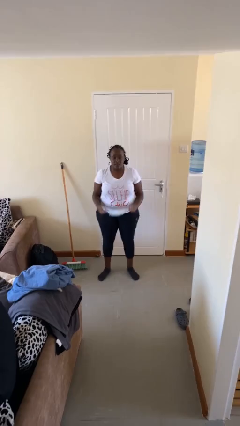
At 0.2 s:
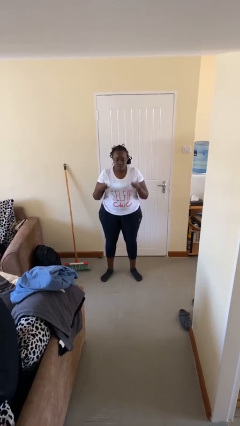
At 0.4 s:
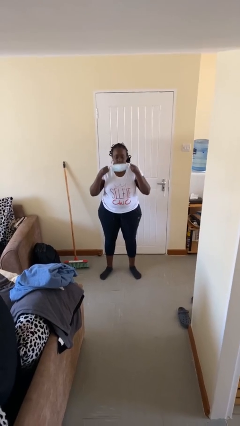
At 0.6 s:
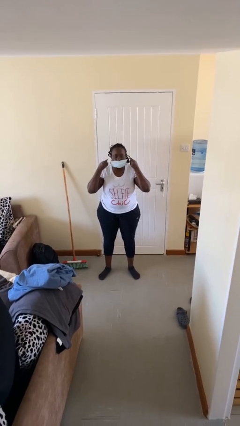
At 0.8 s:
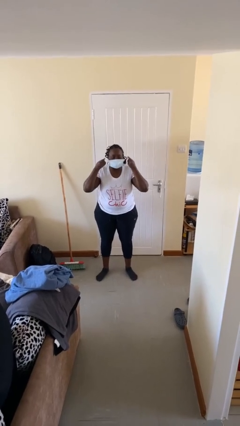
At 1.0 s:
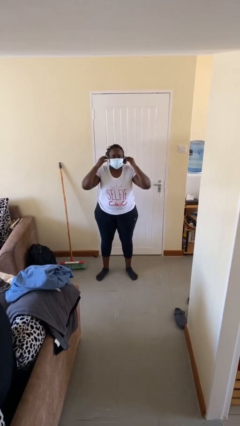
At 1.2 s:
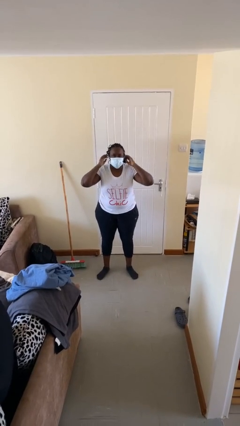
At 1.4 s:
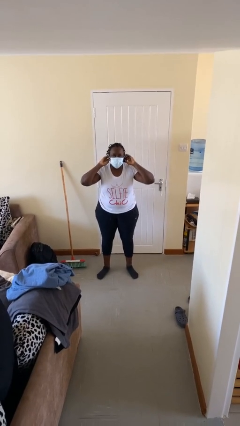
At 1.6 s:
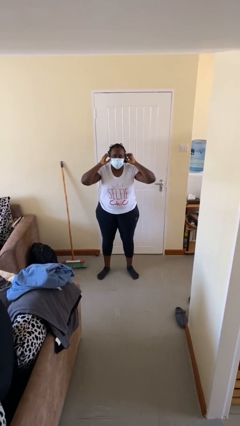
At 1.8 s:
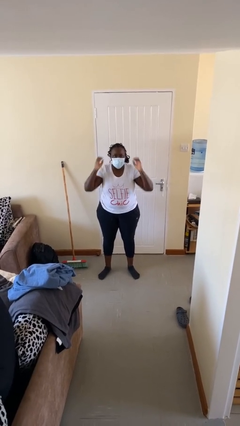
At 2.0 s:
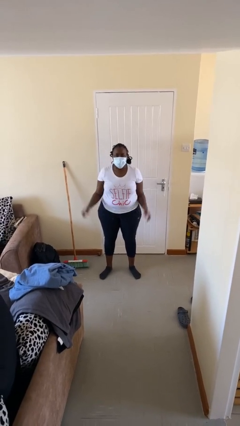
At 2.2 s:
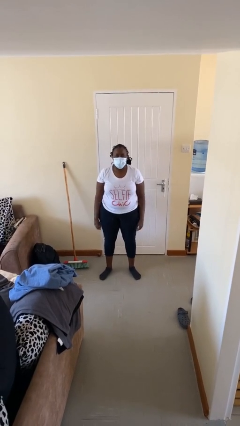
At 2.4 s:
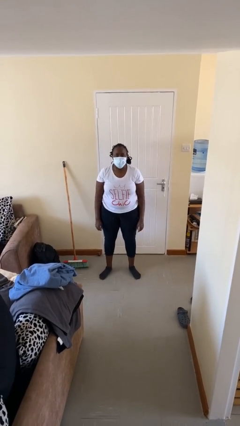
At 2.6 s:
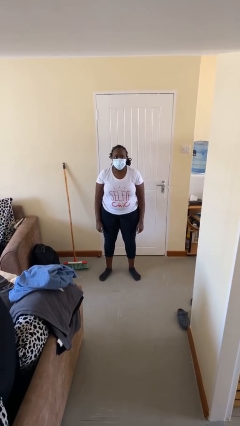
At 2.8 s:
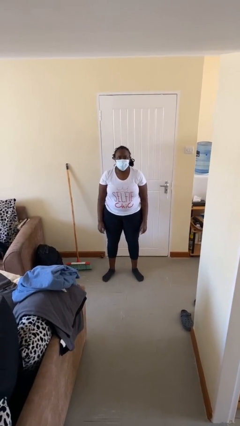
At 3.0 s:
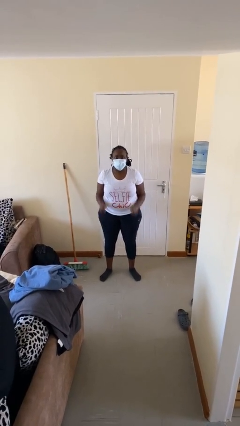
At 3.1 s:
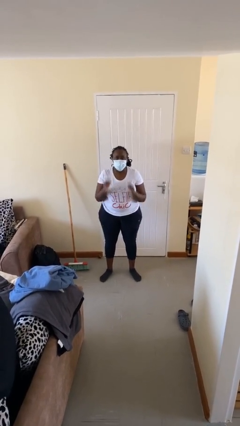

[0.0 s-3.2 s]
person puts on facemask

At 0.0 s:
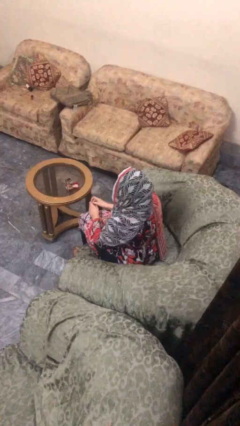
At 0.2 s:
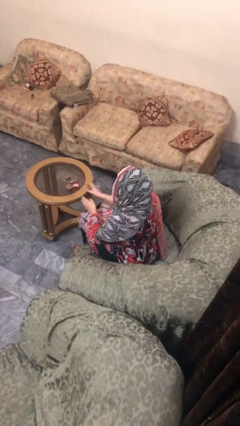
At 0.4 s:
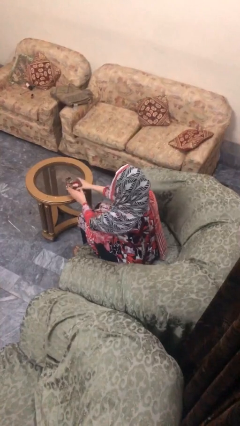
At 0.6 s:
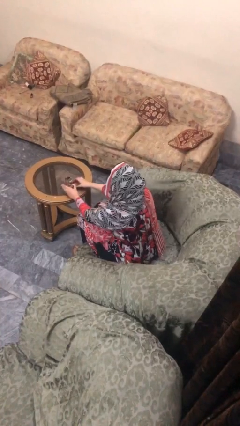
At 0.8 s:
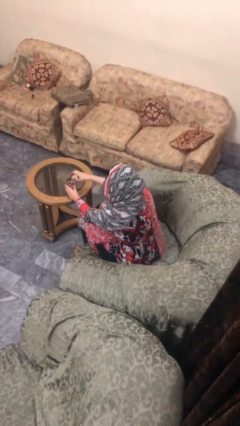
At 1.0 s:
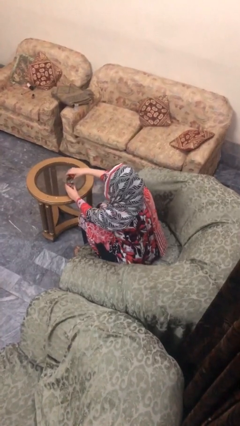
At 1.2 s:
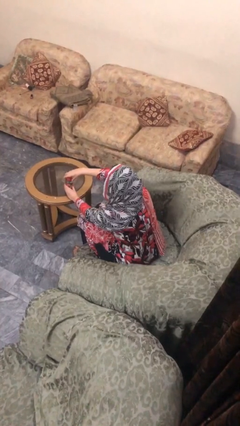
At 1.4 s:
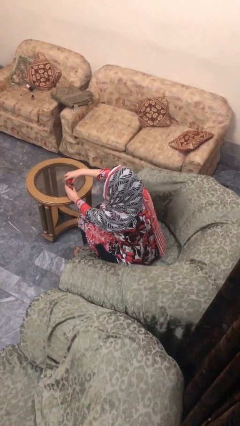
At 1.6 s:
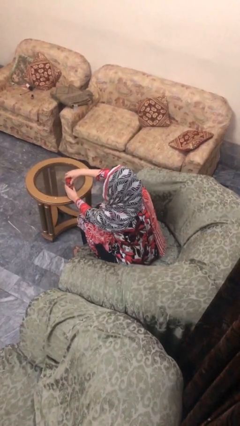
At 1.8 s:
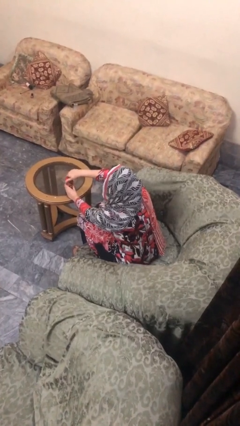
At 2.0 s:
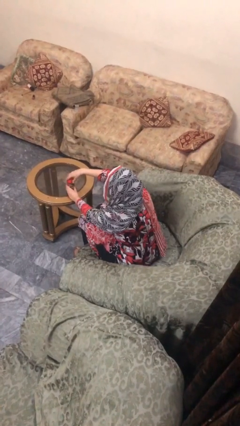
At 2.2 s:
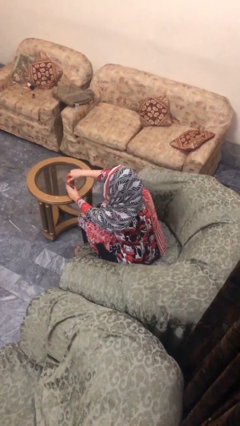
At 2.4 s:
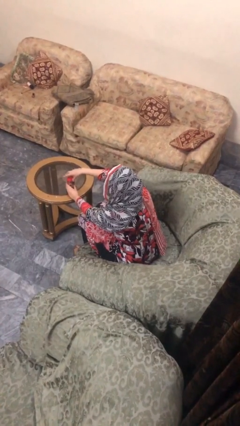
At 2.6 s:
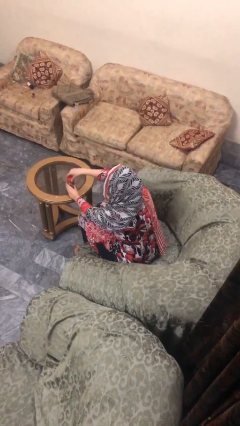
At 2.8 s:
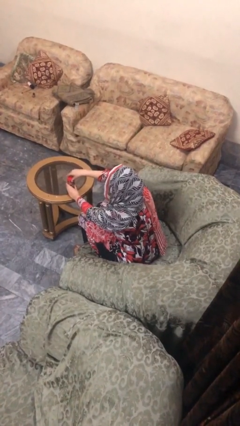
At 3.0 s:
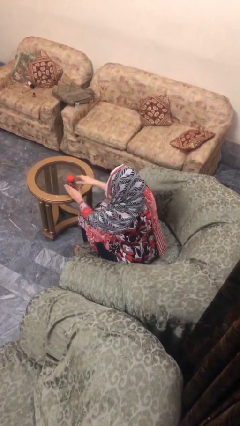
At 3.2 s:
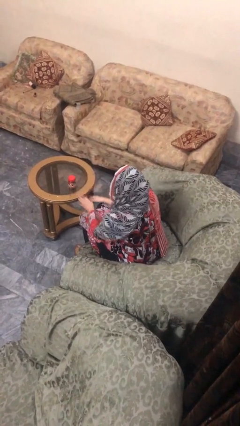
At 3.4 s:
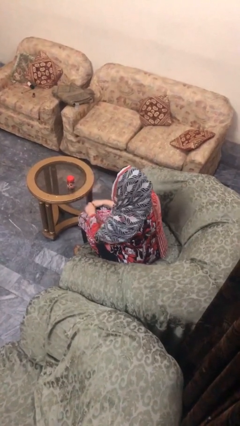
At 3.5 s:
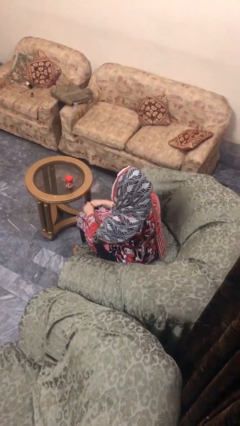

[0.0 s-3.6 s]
person closes jar

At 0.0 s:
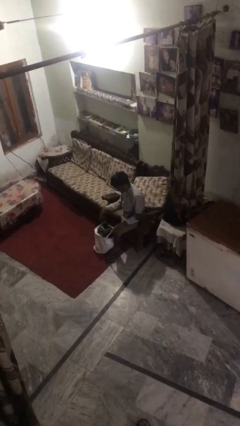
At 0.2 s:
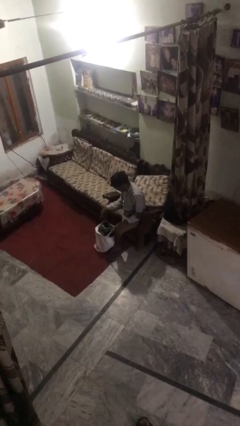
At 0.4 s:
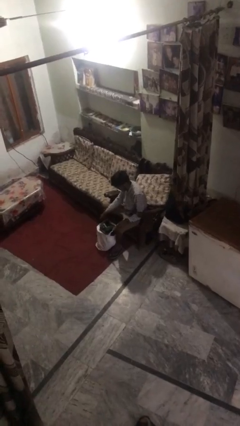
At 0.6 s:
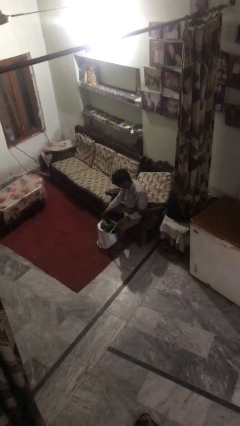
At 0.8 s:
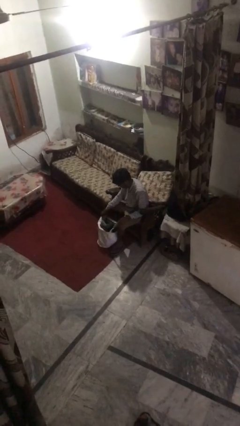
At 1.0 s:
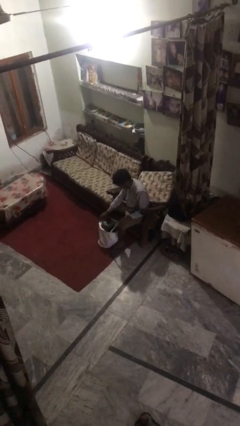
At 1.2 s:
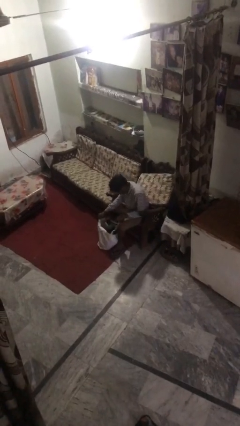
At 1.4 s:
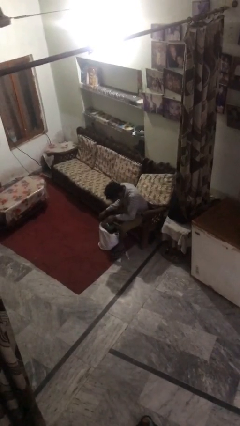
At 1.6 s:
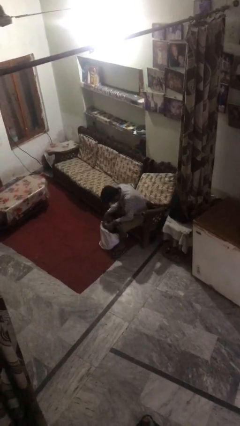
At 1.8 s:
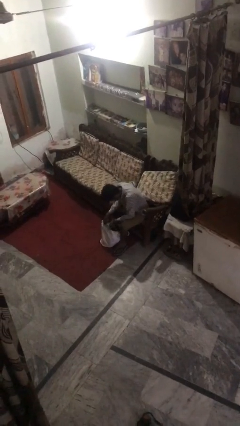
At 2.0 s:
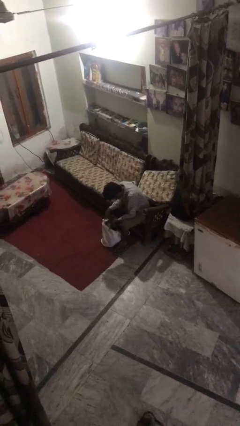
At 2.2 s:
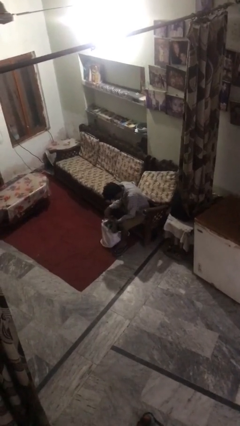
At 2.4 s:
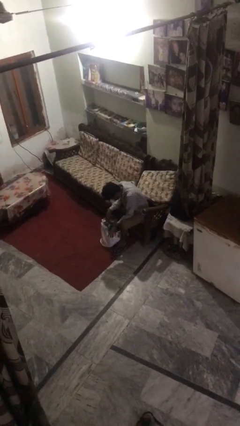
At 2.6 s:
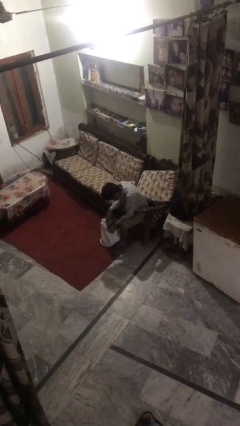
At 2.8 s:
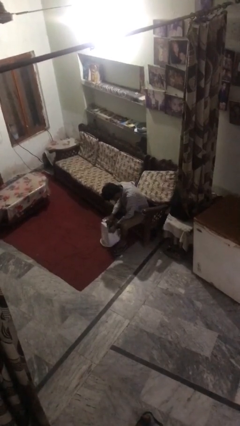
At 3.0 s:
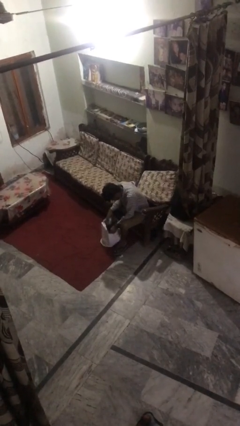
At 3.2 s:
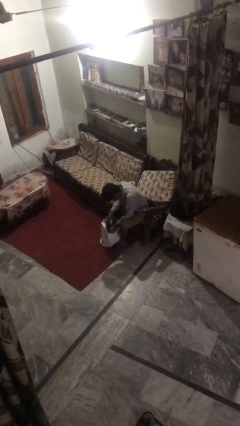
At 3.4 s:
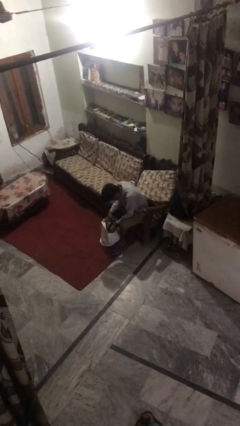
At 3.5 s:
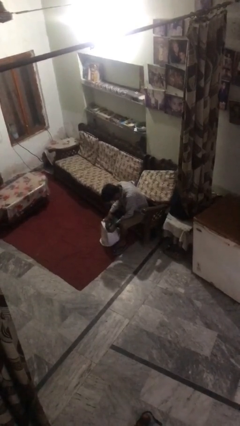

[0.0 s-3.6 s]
person searches under bed

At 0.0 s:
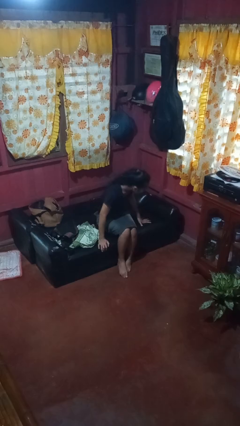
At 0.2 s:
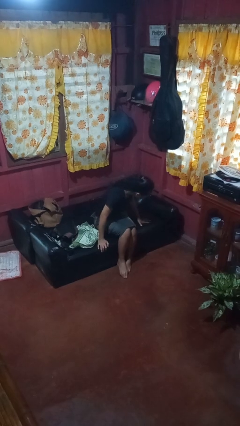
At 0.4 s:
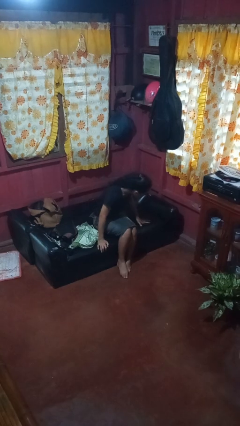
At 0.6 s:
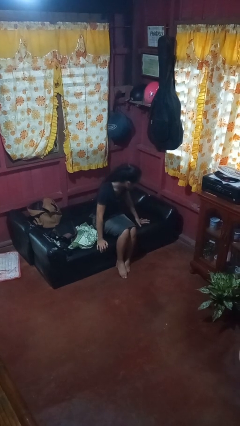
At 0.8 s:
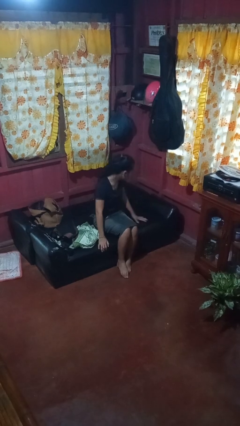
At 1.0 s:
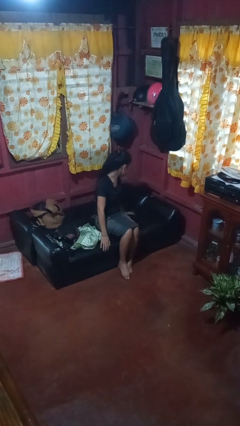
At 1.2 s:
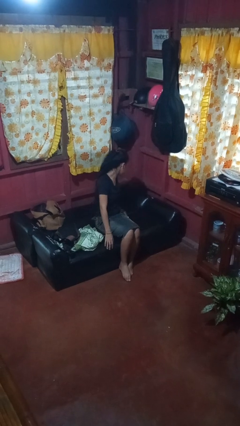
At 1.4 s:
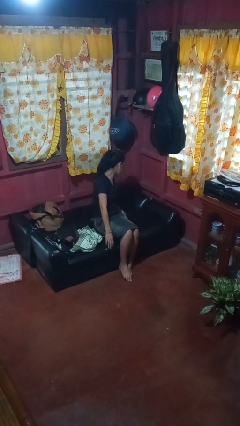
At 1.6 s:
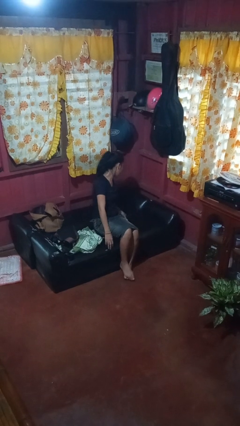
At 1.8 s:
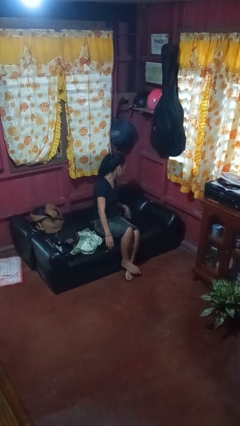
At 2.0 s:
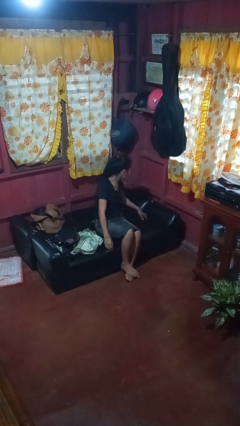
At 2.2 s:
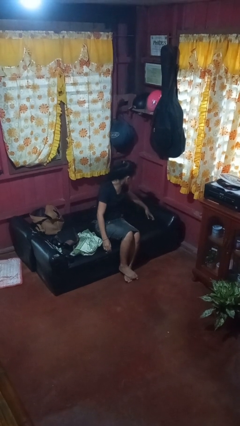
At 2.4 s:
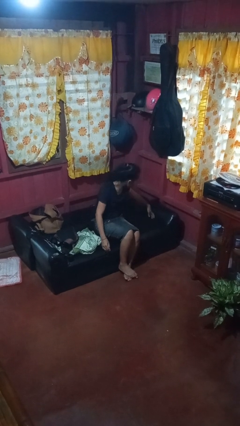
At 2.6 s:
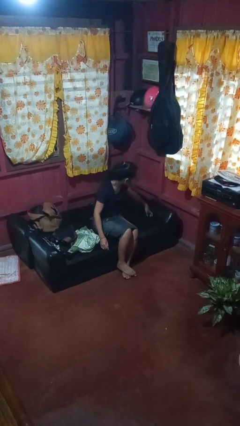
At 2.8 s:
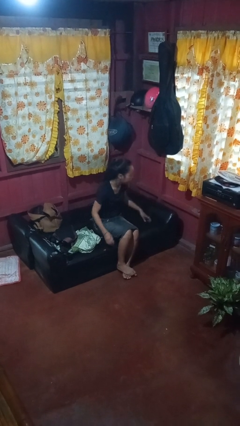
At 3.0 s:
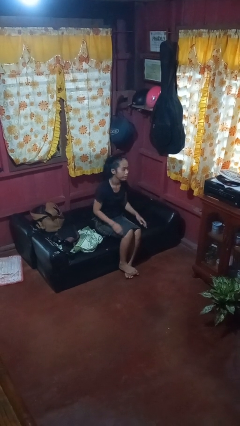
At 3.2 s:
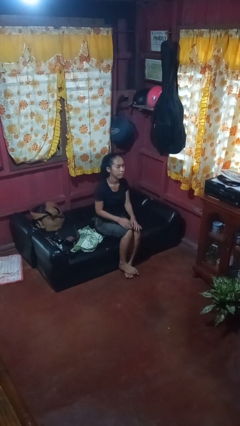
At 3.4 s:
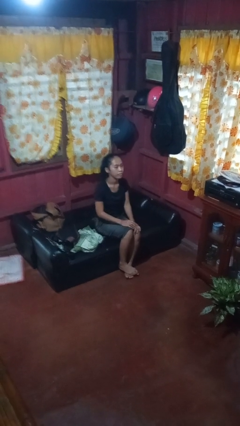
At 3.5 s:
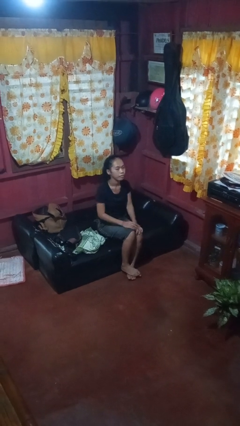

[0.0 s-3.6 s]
person searches in couch

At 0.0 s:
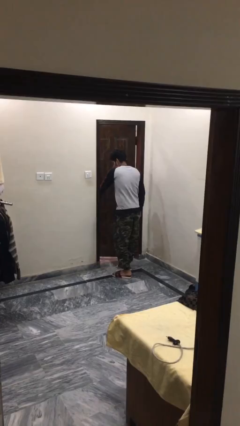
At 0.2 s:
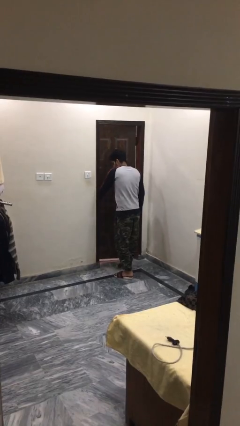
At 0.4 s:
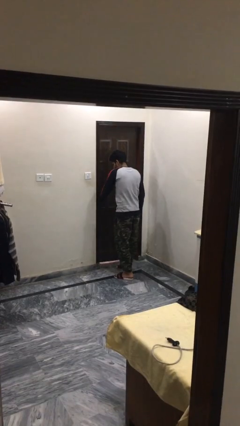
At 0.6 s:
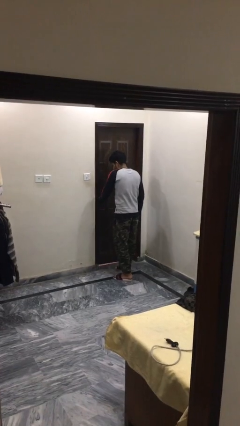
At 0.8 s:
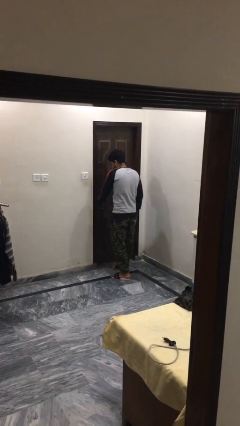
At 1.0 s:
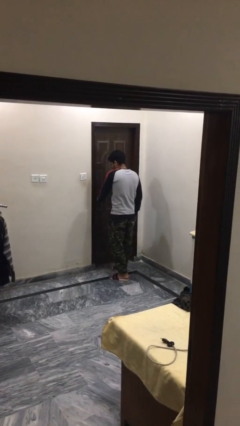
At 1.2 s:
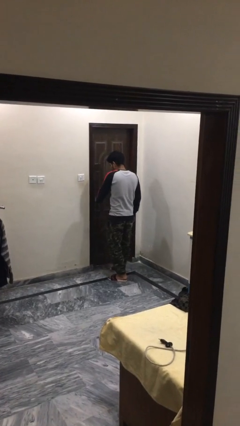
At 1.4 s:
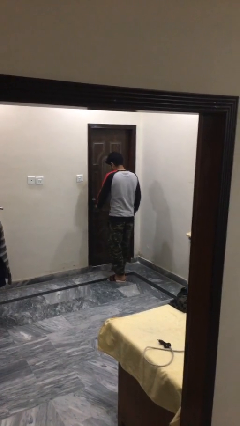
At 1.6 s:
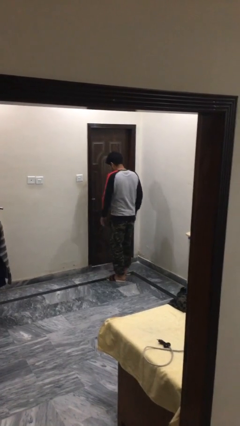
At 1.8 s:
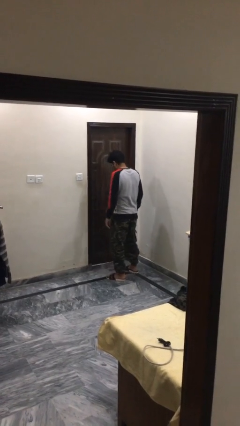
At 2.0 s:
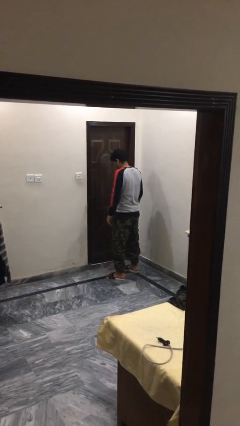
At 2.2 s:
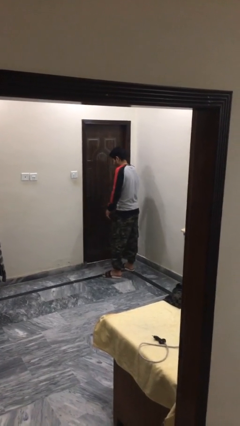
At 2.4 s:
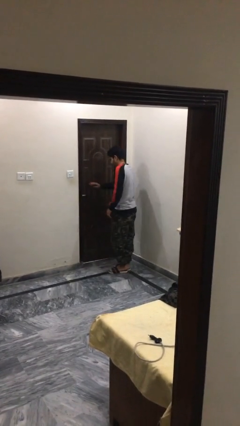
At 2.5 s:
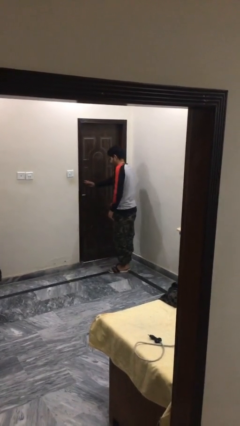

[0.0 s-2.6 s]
person closes facility door

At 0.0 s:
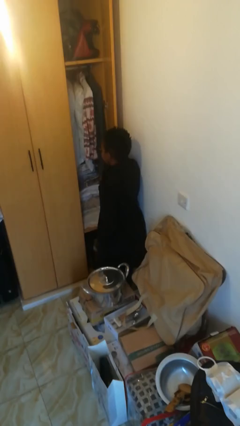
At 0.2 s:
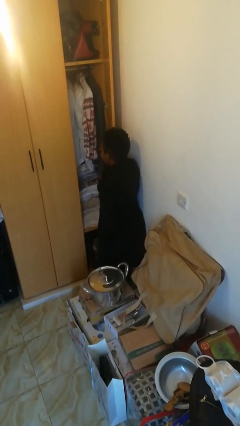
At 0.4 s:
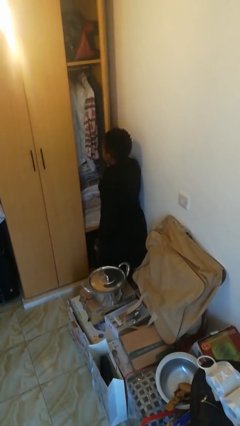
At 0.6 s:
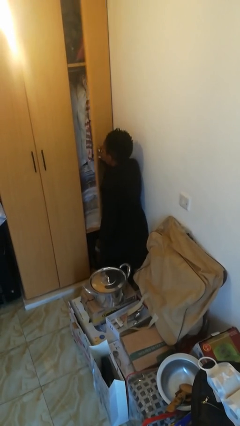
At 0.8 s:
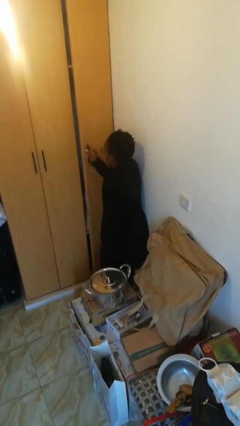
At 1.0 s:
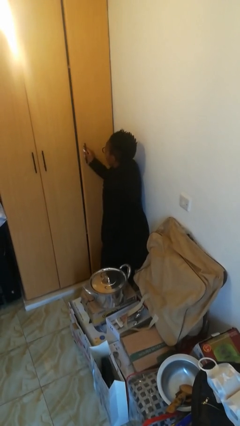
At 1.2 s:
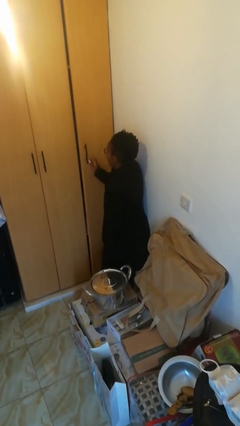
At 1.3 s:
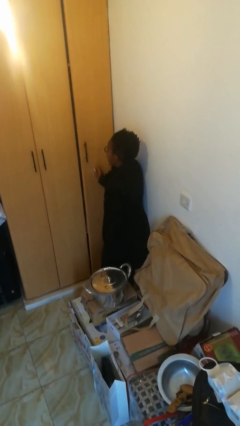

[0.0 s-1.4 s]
person closes closet door
